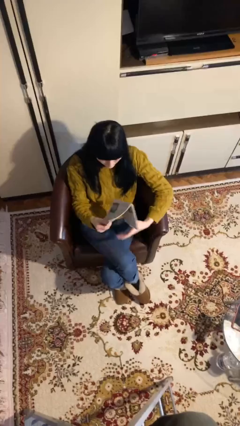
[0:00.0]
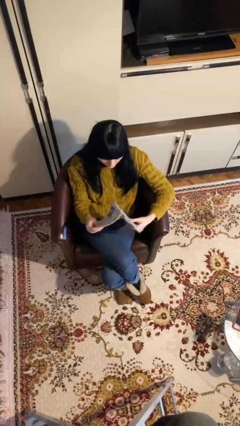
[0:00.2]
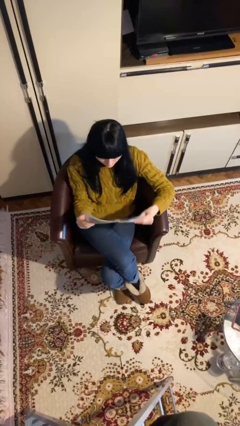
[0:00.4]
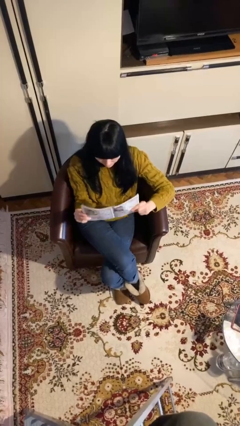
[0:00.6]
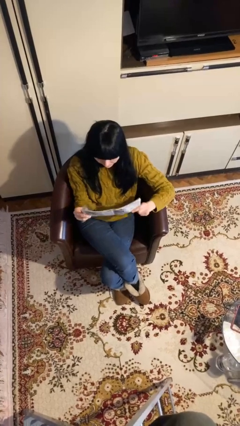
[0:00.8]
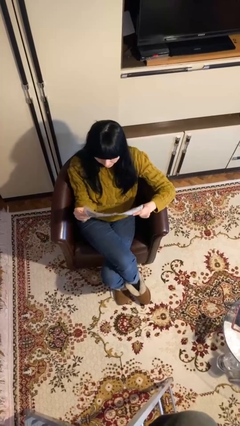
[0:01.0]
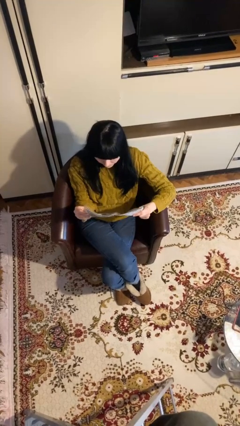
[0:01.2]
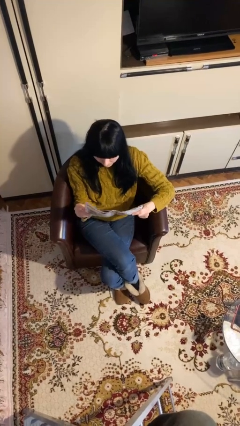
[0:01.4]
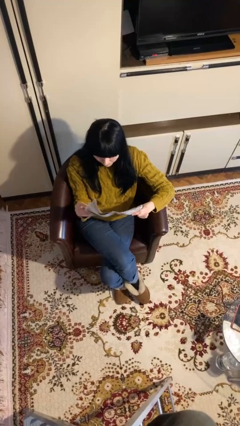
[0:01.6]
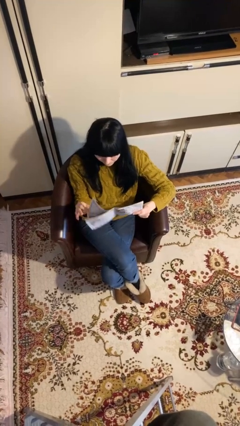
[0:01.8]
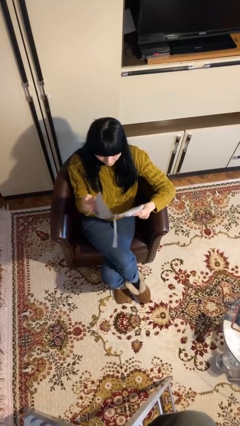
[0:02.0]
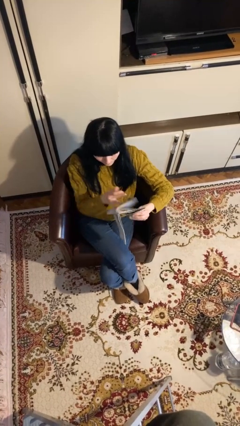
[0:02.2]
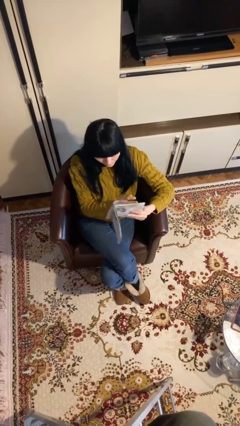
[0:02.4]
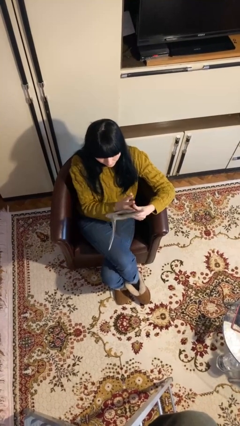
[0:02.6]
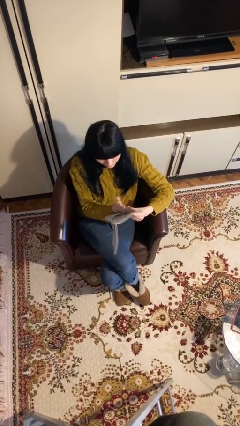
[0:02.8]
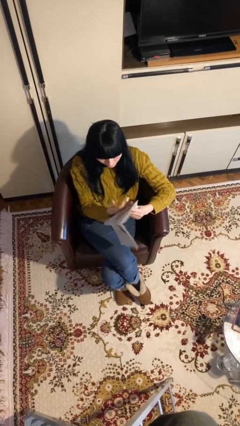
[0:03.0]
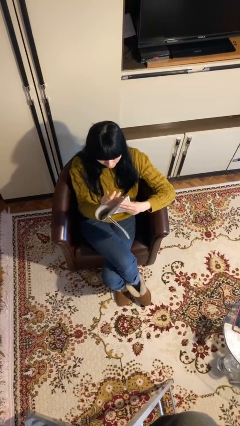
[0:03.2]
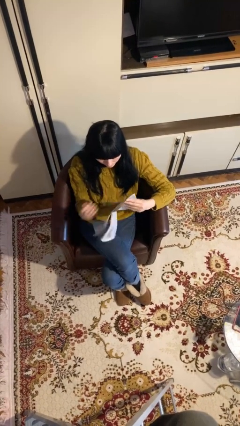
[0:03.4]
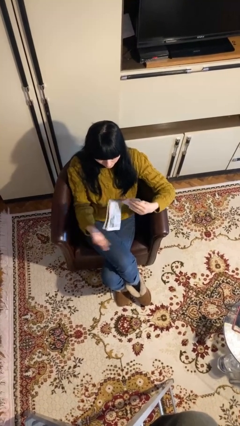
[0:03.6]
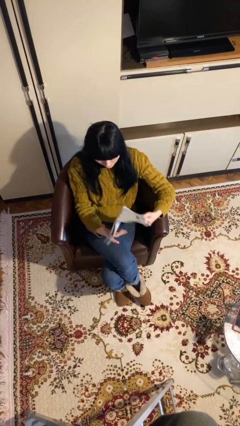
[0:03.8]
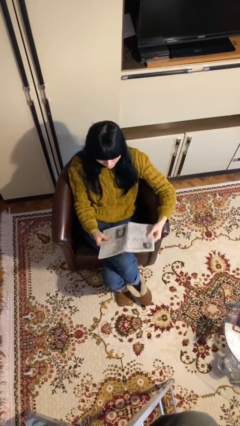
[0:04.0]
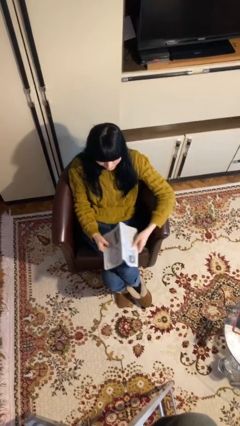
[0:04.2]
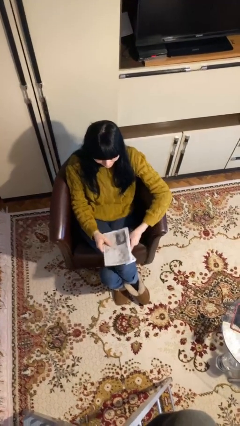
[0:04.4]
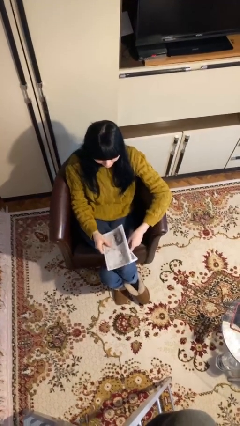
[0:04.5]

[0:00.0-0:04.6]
person reads document

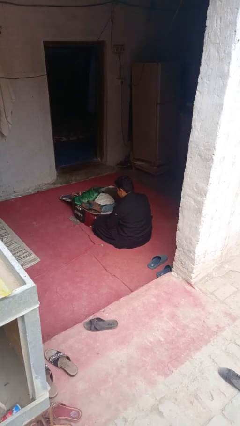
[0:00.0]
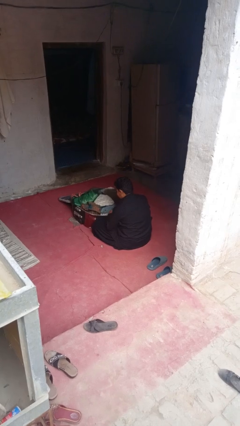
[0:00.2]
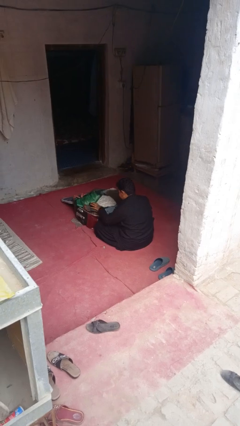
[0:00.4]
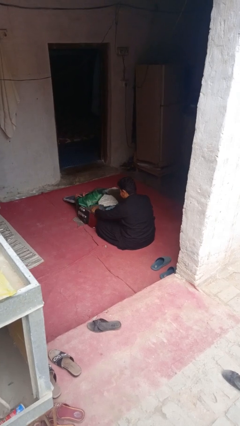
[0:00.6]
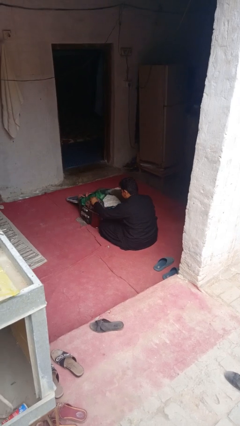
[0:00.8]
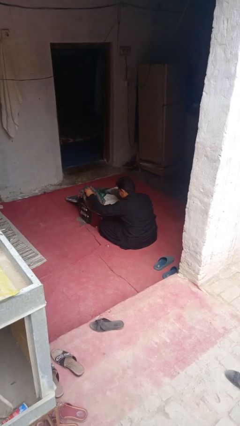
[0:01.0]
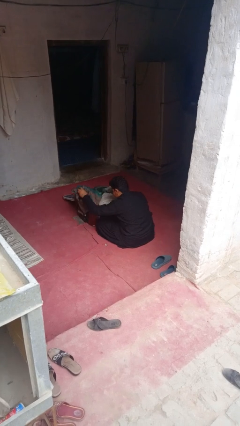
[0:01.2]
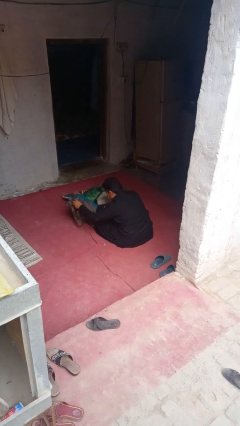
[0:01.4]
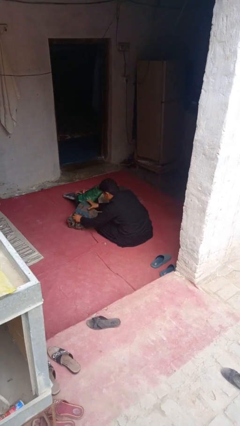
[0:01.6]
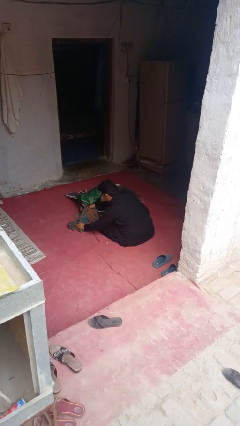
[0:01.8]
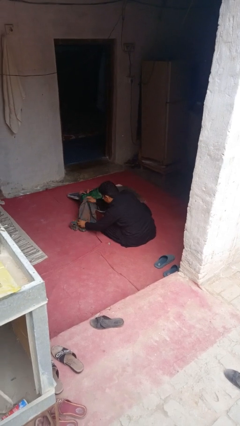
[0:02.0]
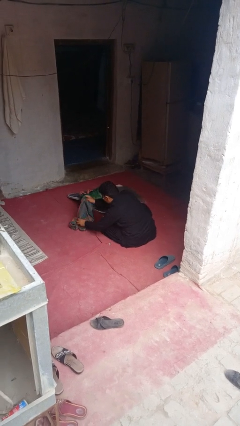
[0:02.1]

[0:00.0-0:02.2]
person unloads clothes from suitcase

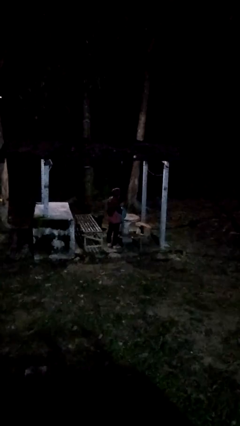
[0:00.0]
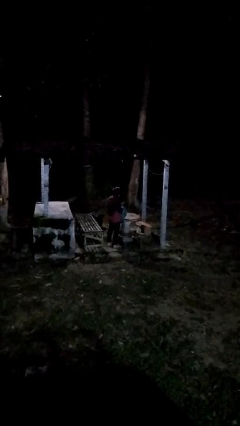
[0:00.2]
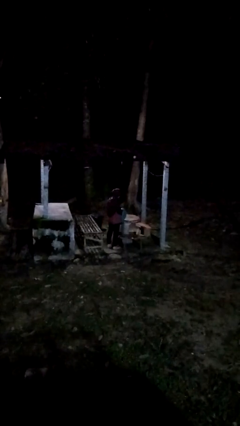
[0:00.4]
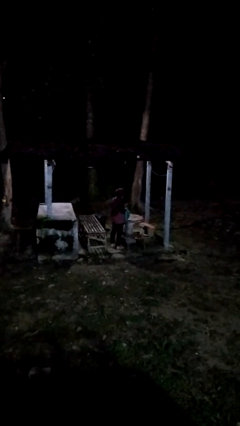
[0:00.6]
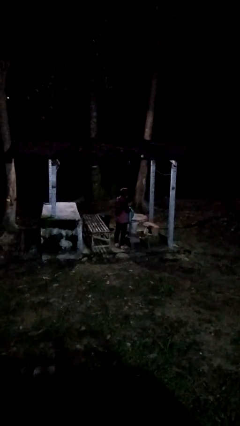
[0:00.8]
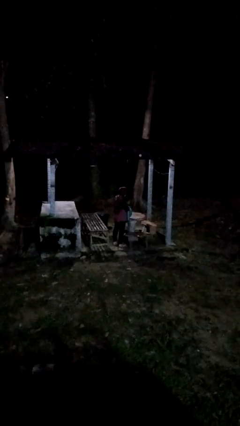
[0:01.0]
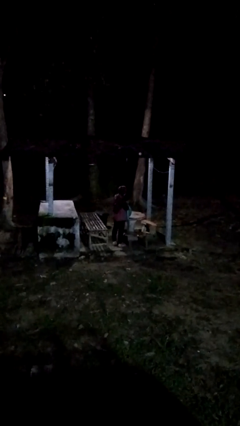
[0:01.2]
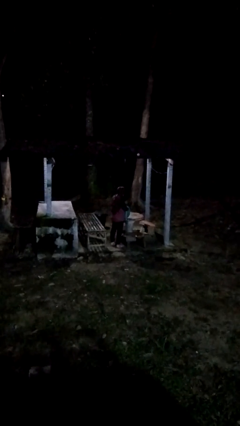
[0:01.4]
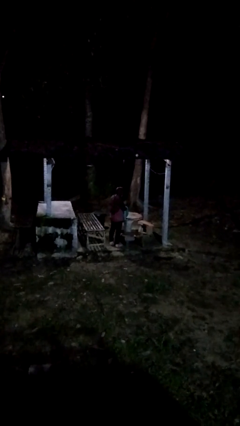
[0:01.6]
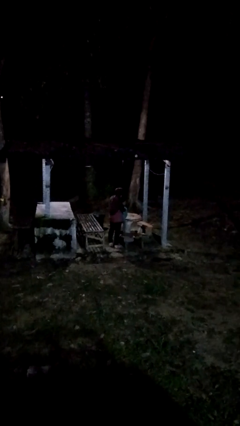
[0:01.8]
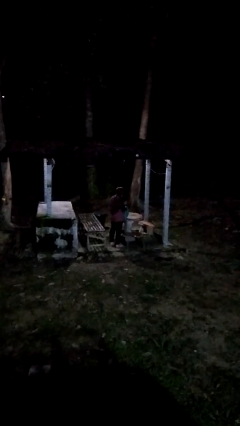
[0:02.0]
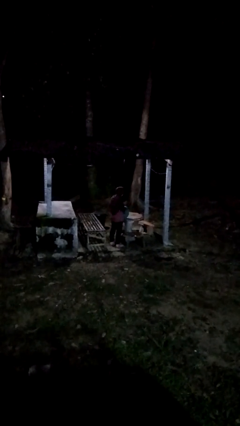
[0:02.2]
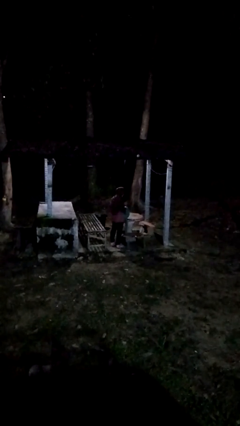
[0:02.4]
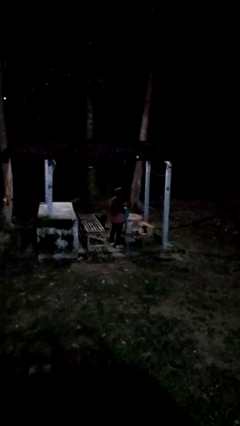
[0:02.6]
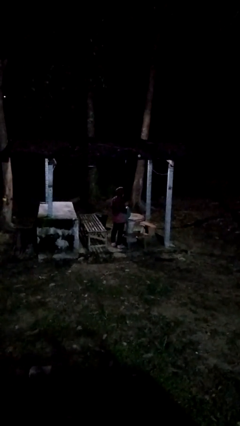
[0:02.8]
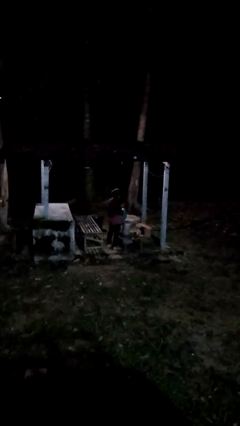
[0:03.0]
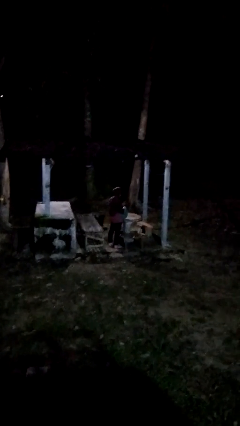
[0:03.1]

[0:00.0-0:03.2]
person searches in bag

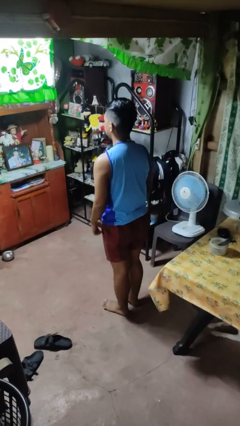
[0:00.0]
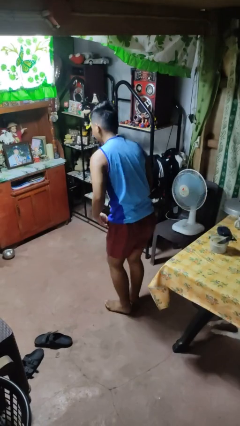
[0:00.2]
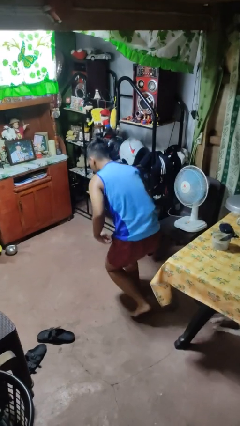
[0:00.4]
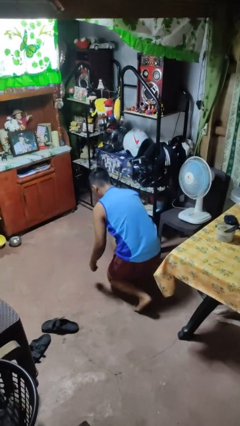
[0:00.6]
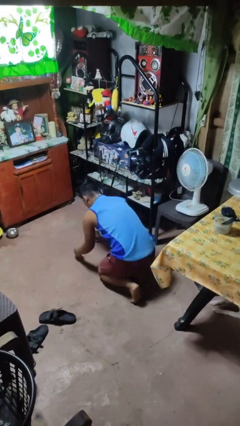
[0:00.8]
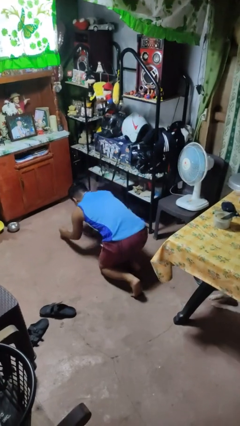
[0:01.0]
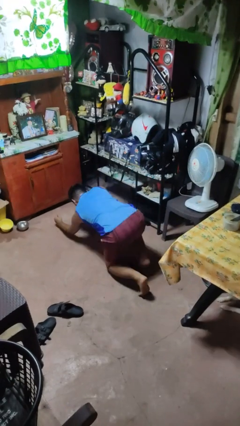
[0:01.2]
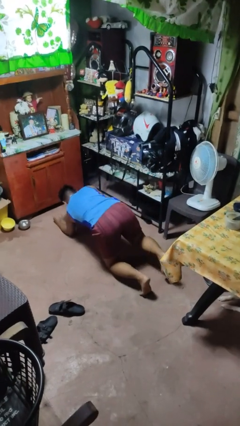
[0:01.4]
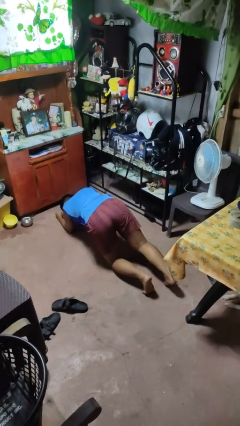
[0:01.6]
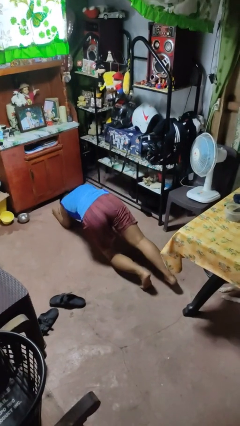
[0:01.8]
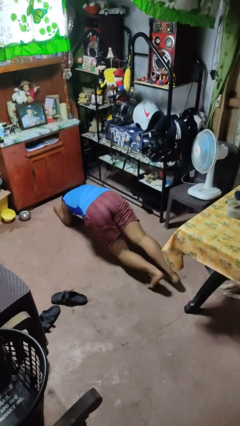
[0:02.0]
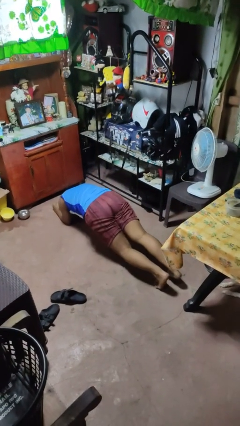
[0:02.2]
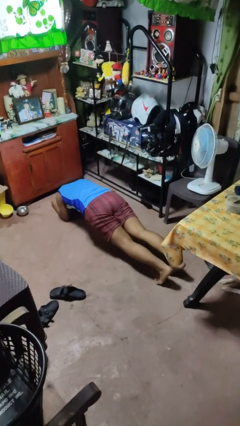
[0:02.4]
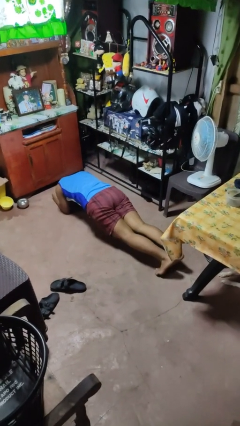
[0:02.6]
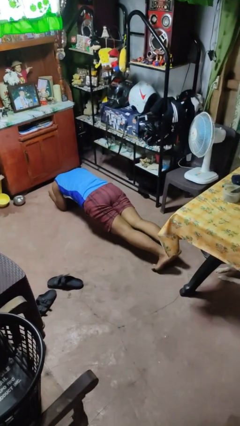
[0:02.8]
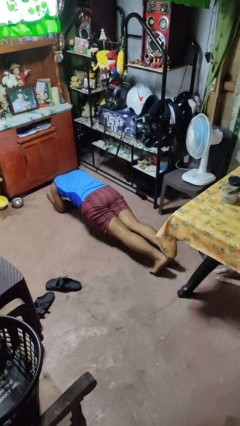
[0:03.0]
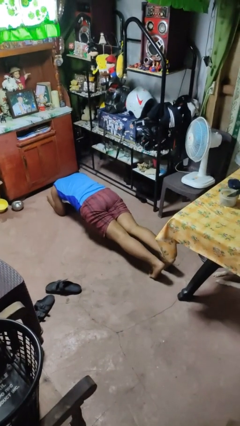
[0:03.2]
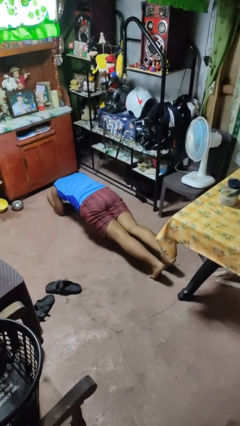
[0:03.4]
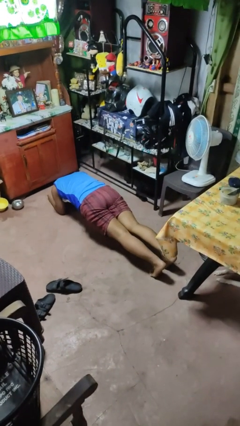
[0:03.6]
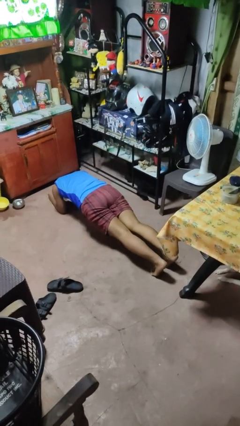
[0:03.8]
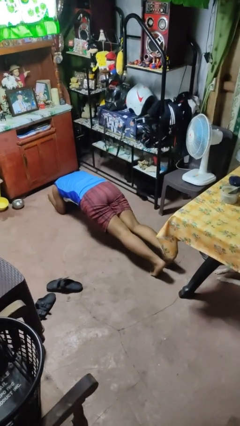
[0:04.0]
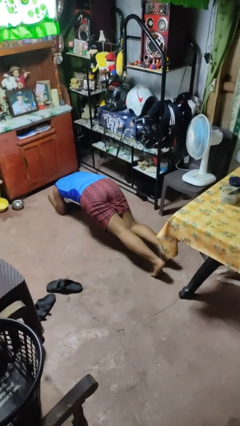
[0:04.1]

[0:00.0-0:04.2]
person exercises with plank

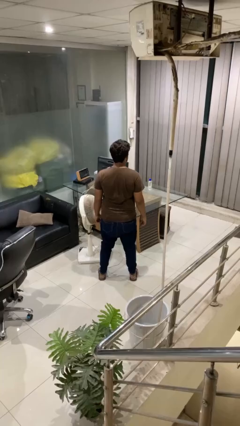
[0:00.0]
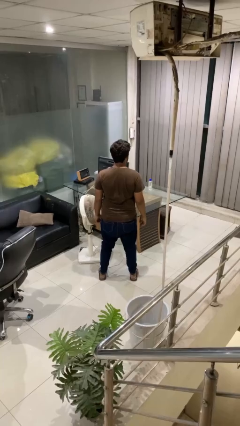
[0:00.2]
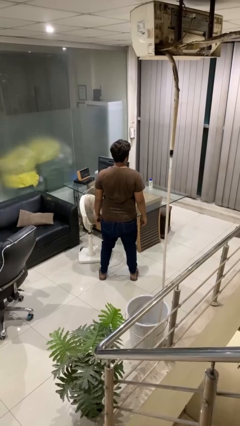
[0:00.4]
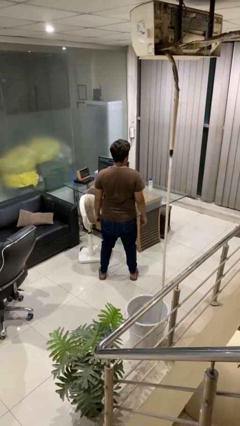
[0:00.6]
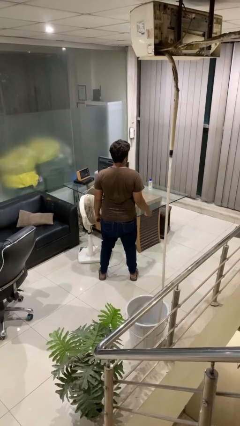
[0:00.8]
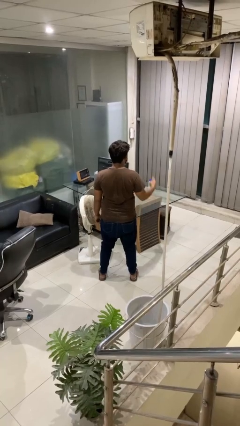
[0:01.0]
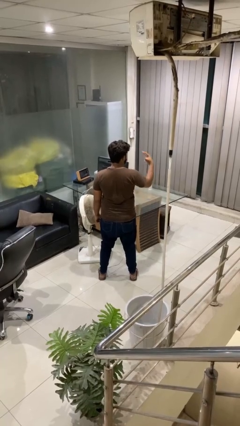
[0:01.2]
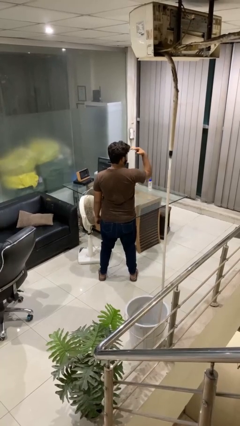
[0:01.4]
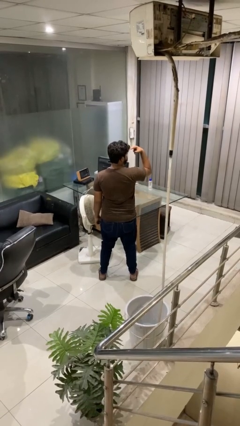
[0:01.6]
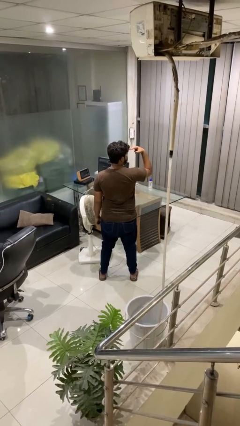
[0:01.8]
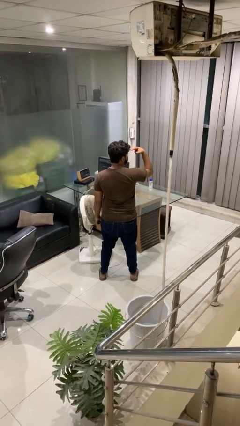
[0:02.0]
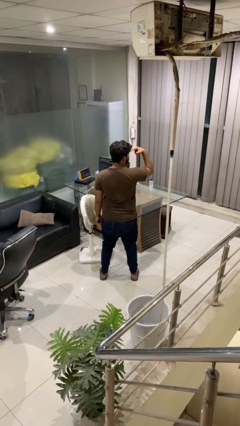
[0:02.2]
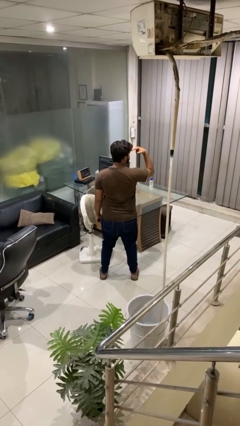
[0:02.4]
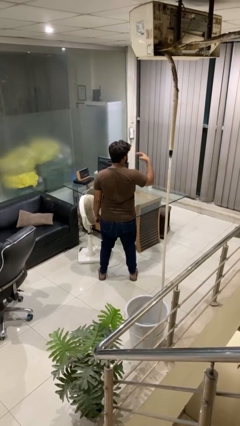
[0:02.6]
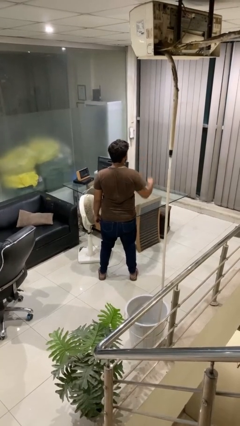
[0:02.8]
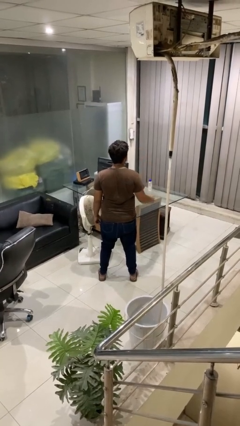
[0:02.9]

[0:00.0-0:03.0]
person gestures watch closely
